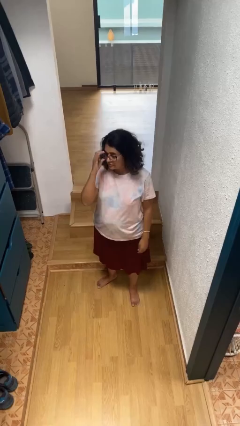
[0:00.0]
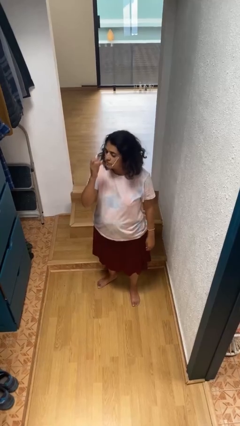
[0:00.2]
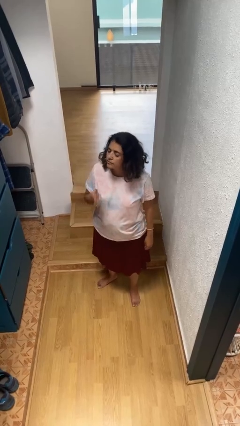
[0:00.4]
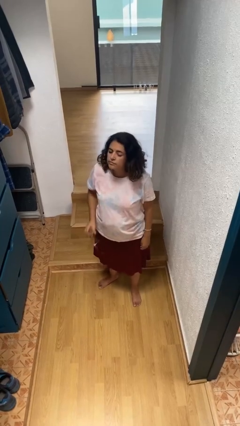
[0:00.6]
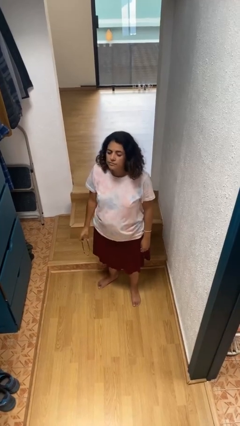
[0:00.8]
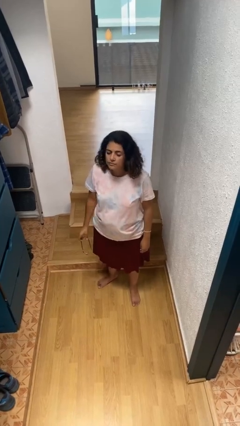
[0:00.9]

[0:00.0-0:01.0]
person takes off glasses

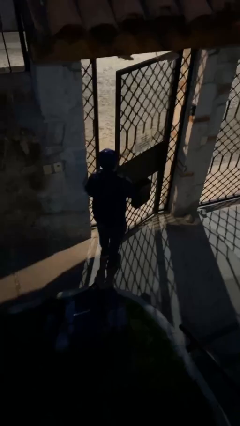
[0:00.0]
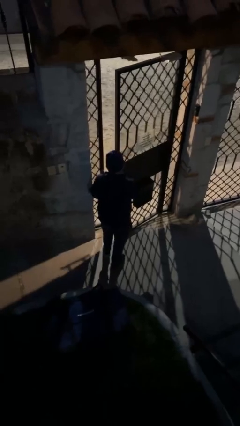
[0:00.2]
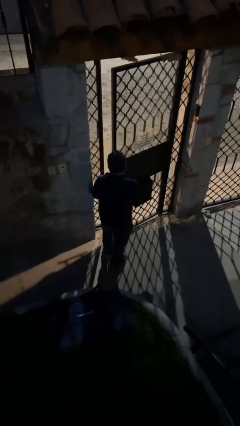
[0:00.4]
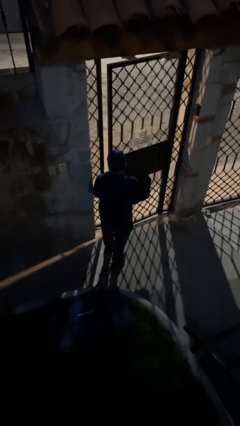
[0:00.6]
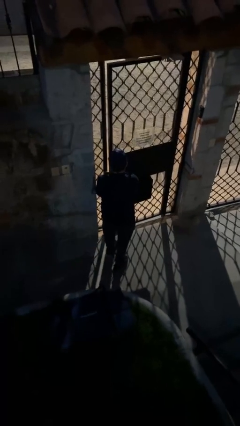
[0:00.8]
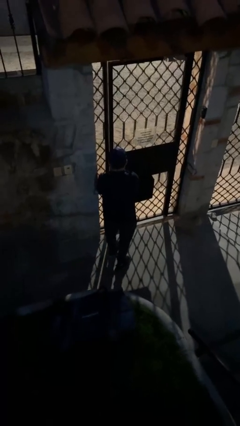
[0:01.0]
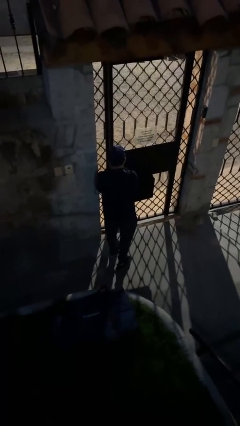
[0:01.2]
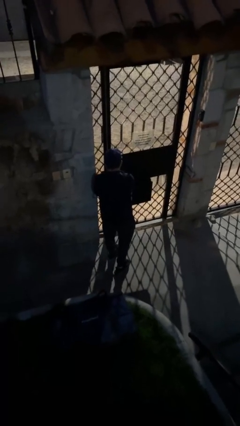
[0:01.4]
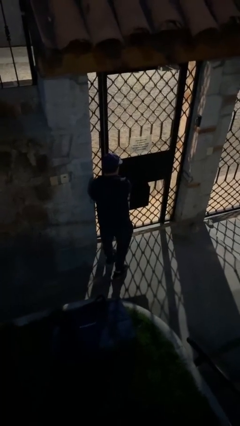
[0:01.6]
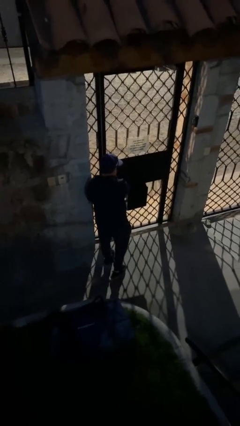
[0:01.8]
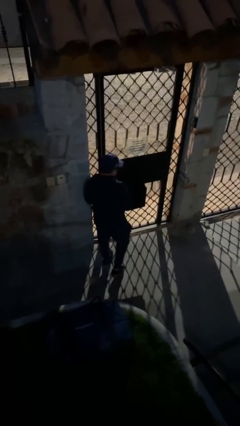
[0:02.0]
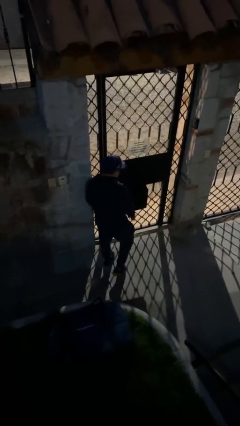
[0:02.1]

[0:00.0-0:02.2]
person closes facility door

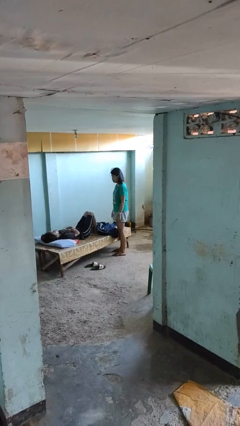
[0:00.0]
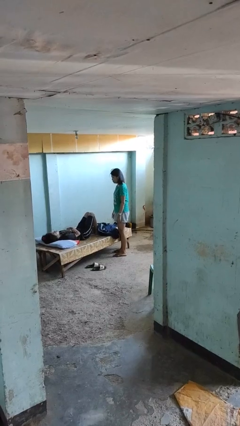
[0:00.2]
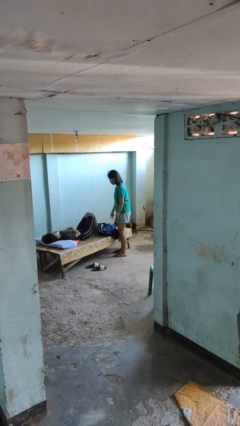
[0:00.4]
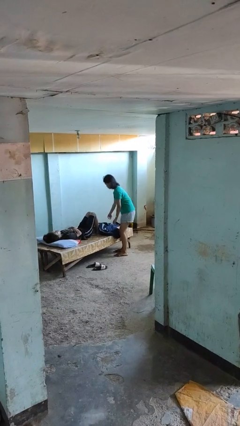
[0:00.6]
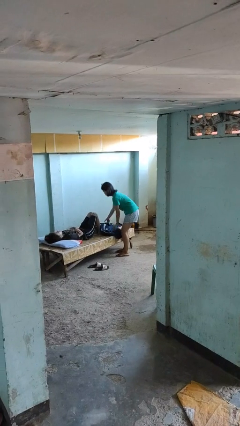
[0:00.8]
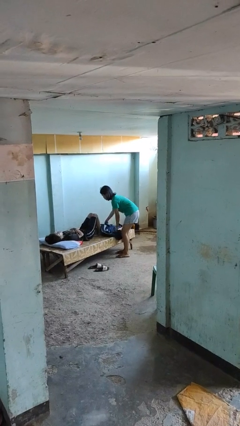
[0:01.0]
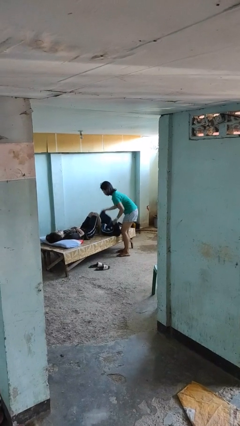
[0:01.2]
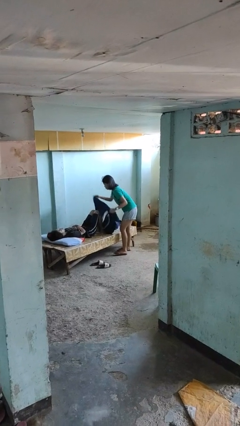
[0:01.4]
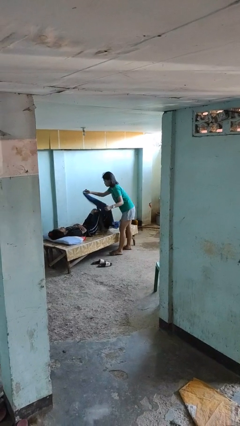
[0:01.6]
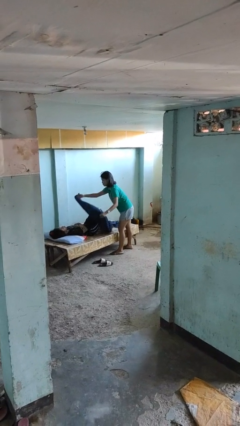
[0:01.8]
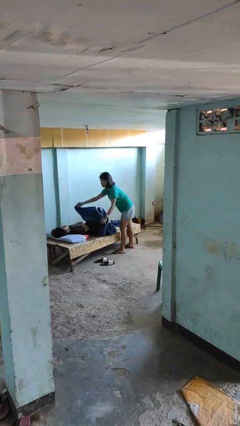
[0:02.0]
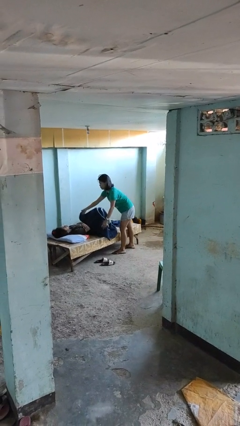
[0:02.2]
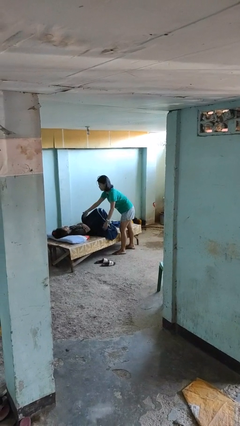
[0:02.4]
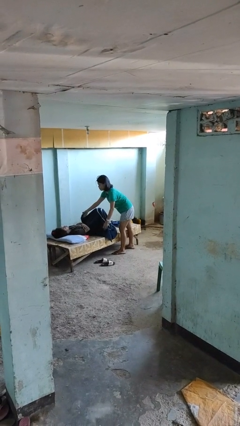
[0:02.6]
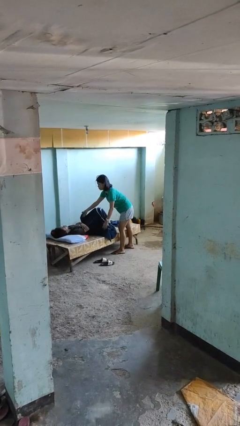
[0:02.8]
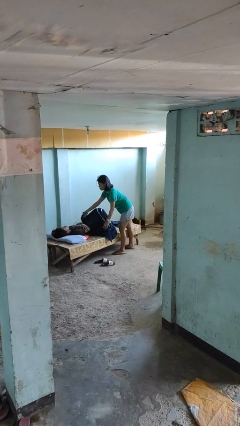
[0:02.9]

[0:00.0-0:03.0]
person covers friend with blanket

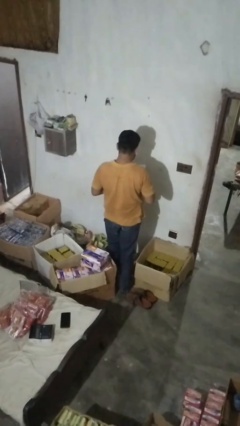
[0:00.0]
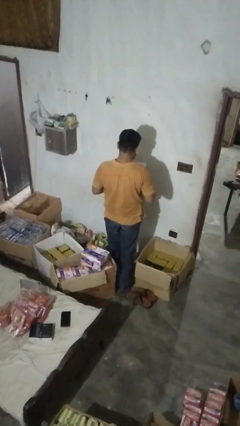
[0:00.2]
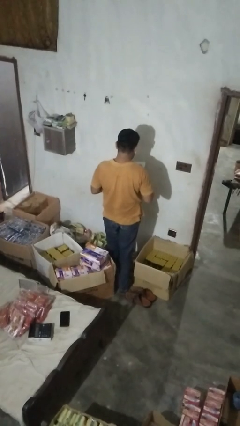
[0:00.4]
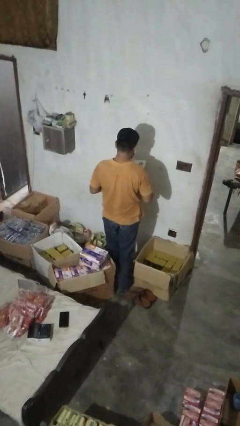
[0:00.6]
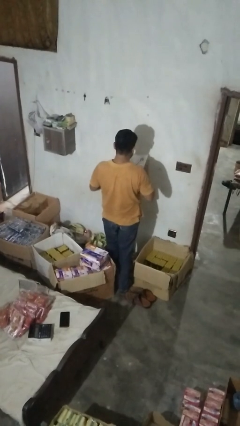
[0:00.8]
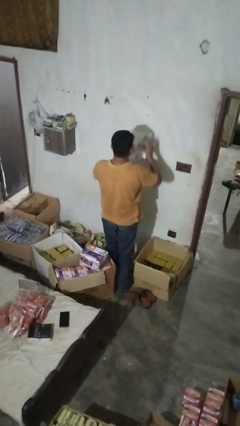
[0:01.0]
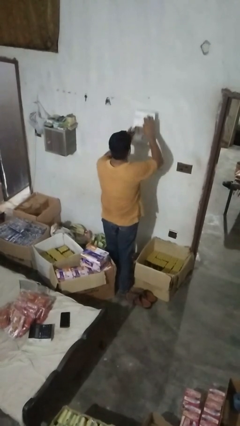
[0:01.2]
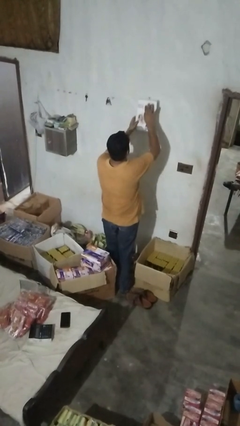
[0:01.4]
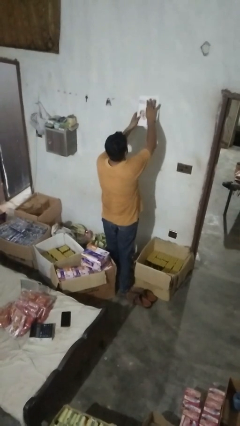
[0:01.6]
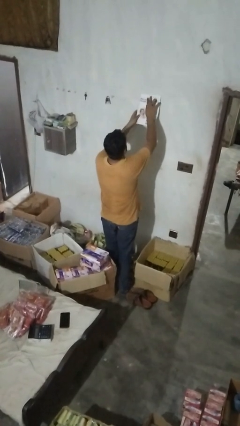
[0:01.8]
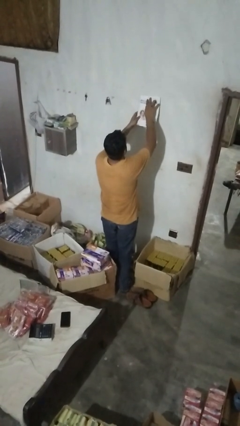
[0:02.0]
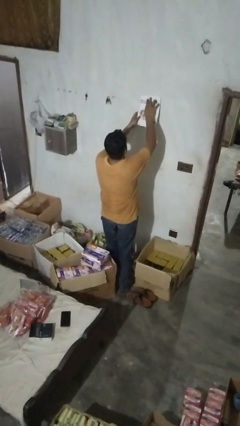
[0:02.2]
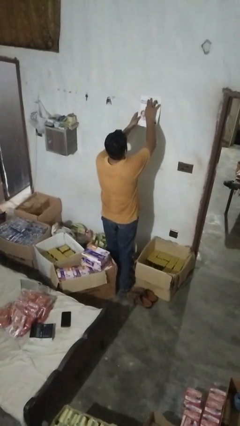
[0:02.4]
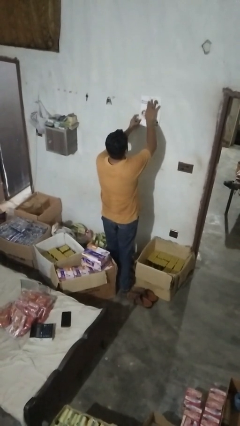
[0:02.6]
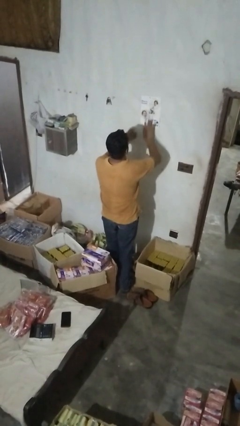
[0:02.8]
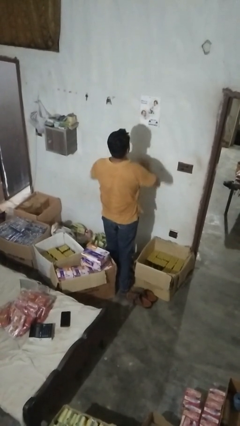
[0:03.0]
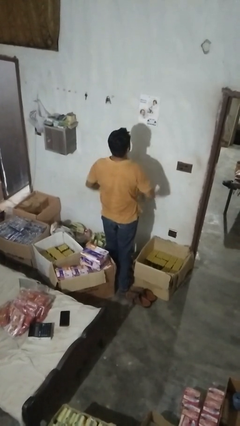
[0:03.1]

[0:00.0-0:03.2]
person puts up picture frame

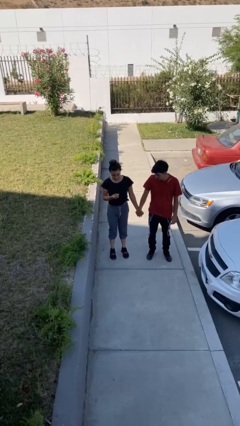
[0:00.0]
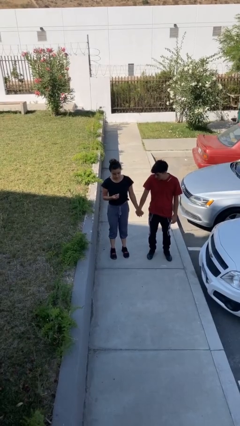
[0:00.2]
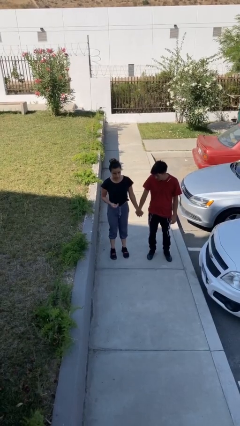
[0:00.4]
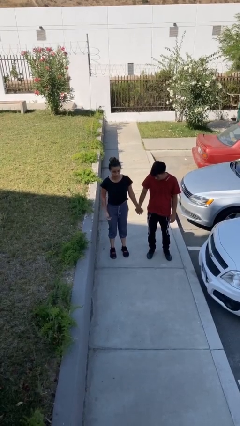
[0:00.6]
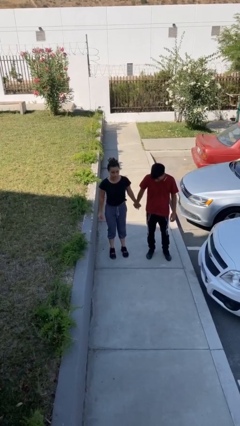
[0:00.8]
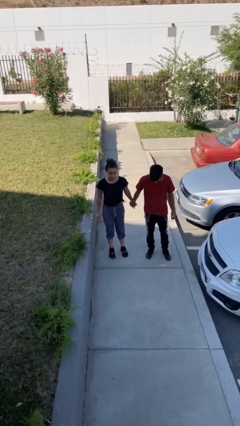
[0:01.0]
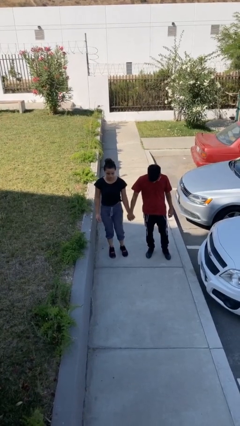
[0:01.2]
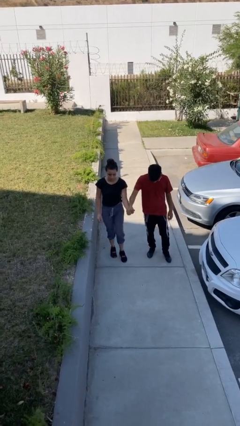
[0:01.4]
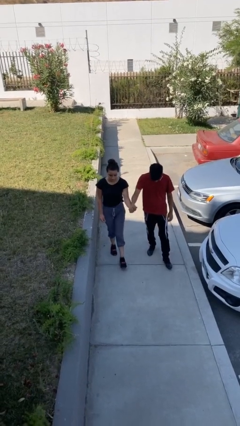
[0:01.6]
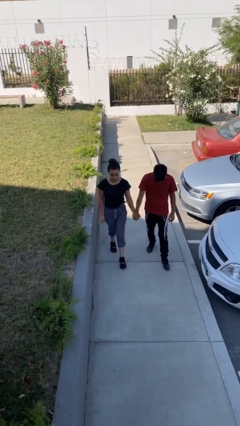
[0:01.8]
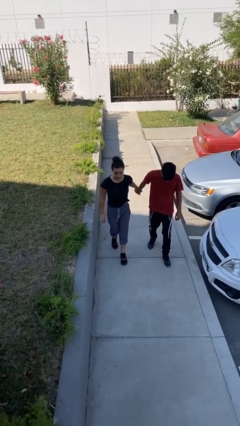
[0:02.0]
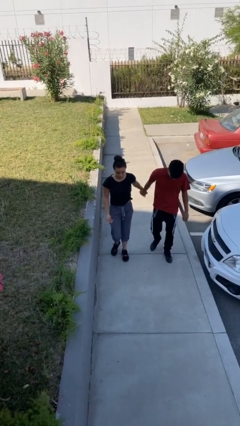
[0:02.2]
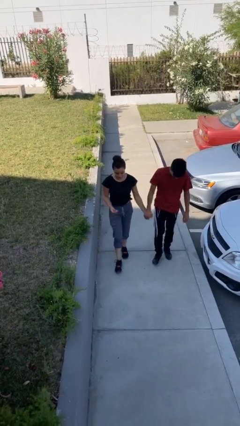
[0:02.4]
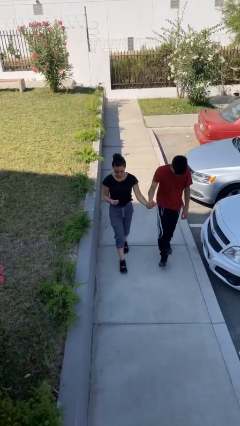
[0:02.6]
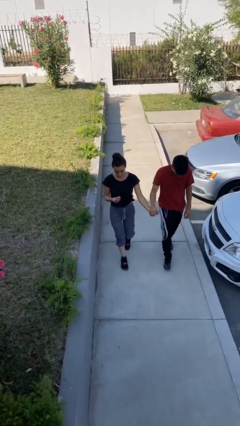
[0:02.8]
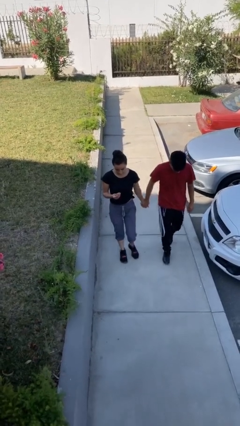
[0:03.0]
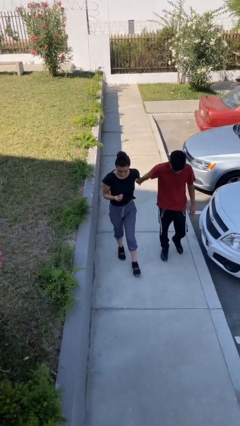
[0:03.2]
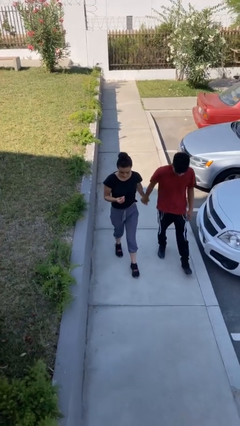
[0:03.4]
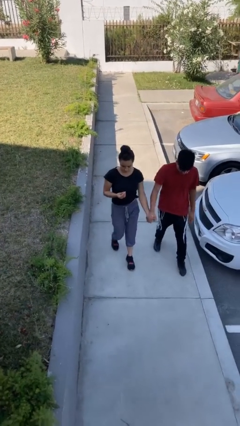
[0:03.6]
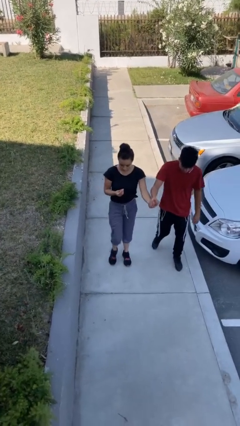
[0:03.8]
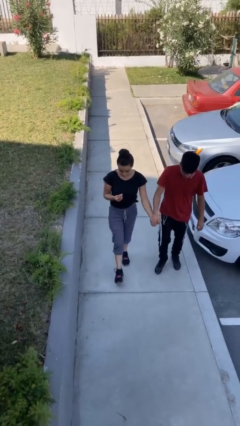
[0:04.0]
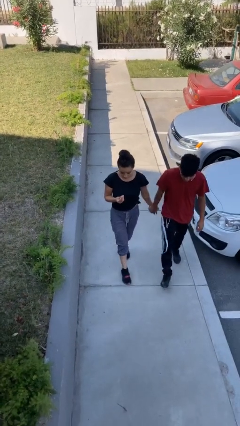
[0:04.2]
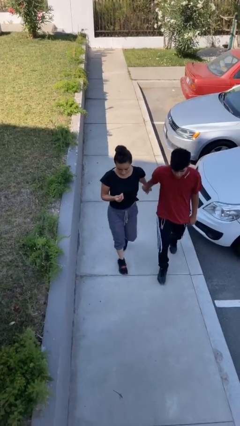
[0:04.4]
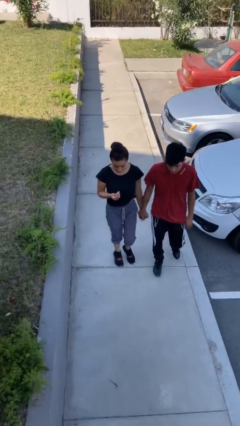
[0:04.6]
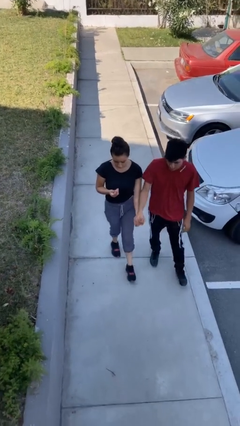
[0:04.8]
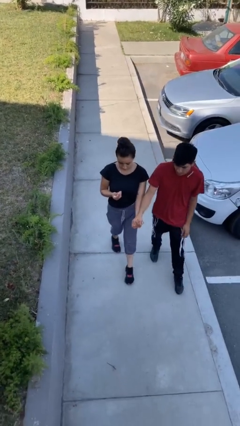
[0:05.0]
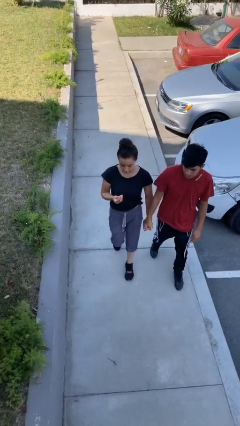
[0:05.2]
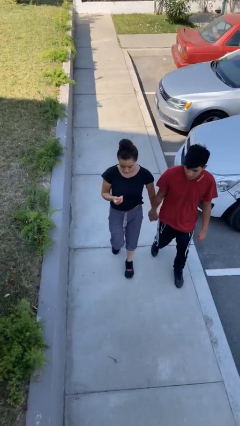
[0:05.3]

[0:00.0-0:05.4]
person holds hand

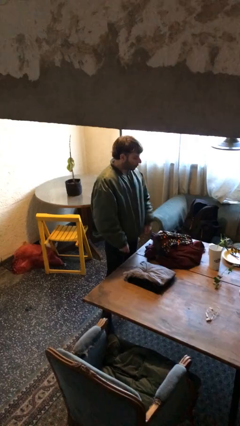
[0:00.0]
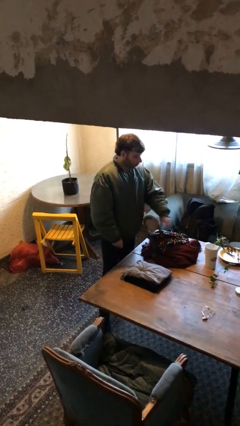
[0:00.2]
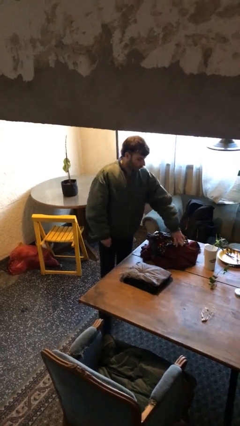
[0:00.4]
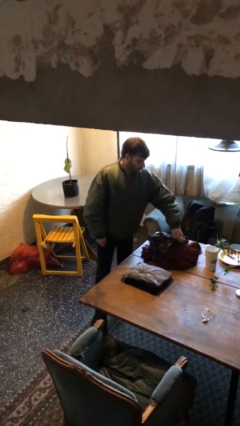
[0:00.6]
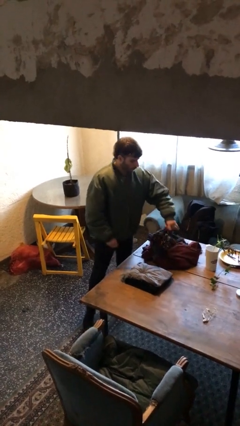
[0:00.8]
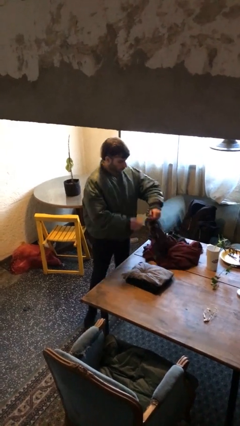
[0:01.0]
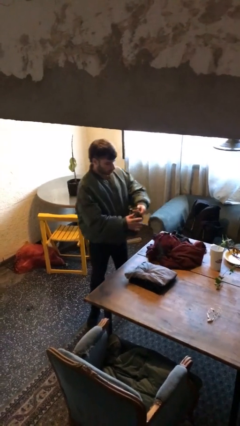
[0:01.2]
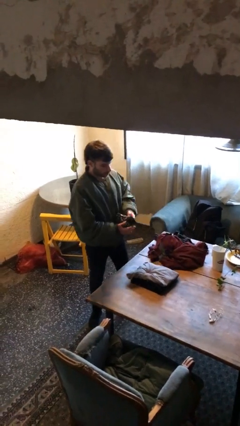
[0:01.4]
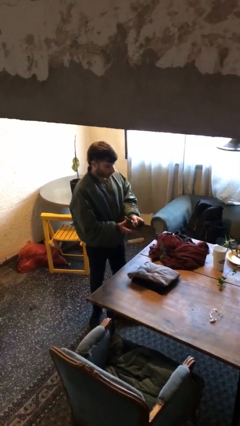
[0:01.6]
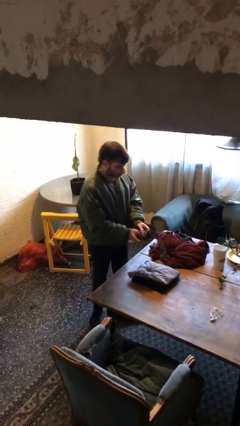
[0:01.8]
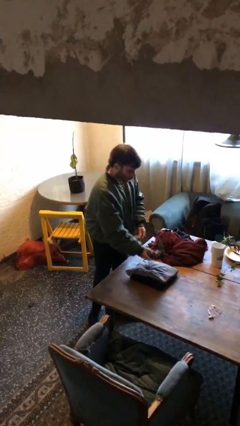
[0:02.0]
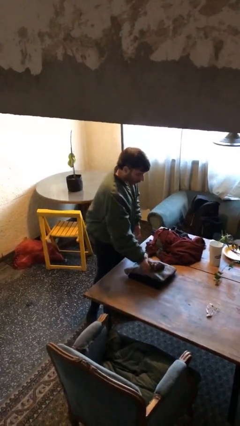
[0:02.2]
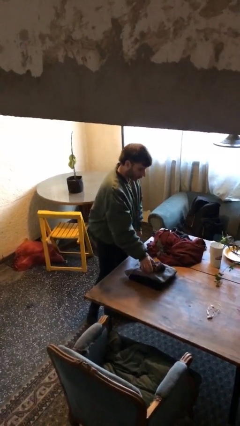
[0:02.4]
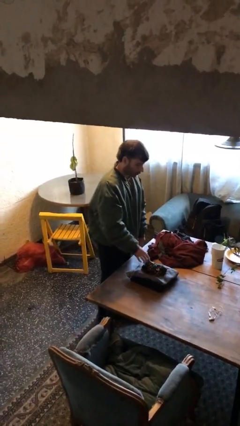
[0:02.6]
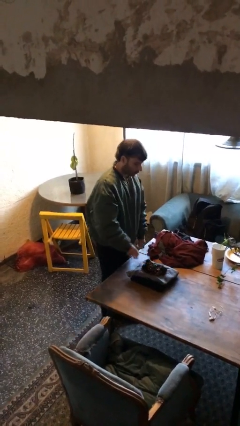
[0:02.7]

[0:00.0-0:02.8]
person folds socks
